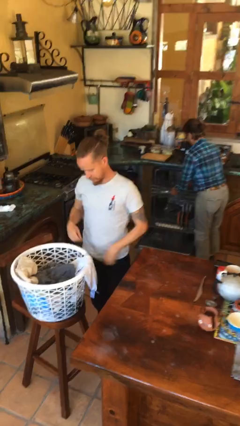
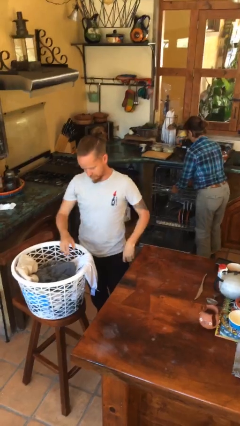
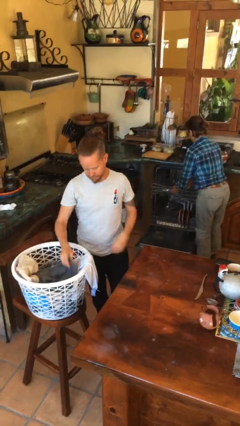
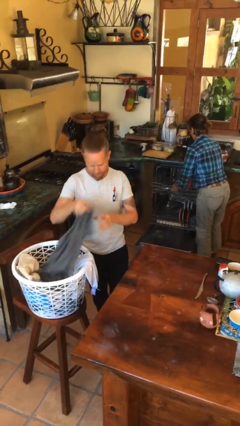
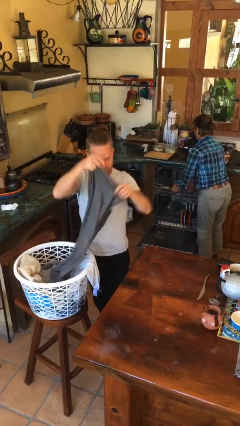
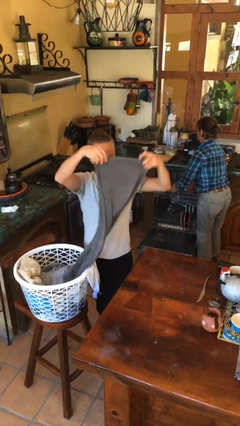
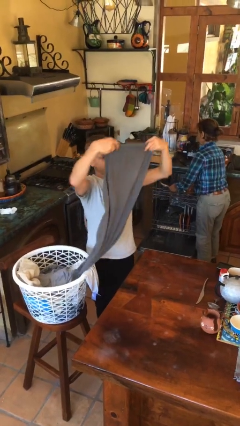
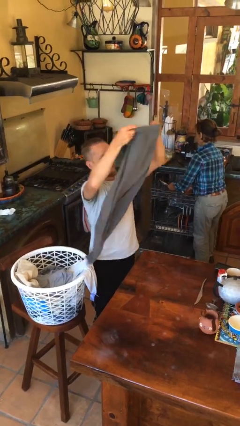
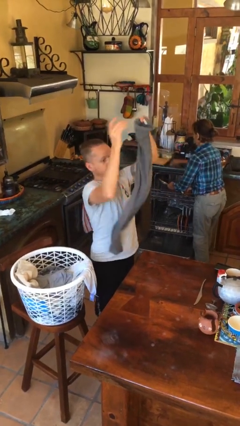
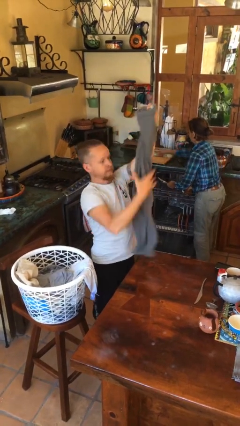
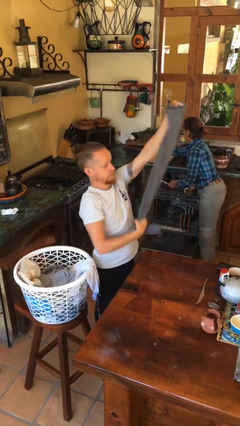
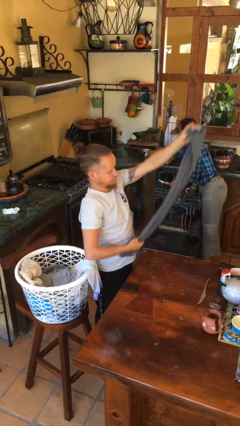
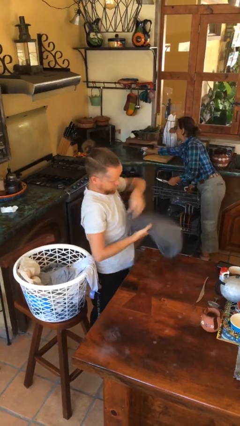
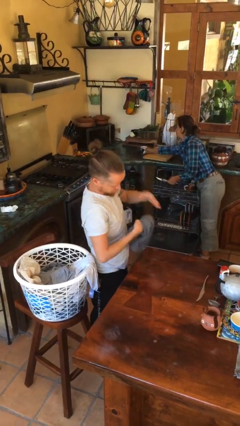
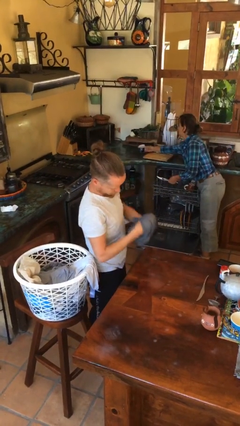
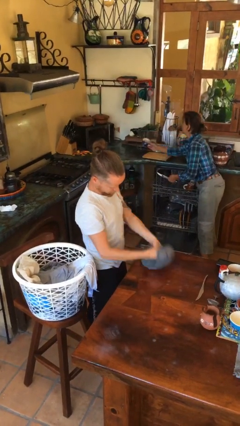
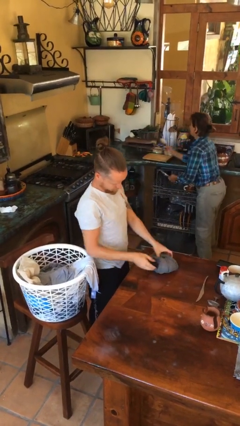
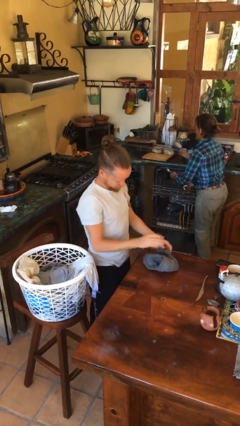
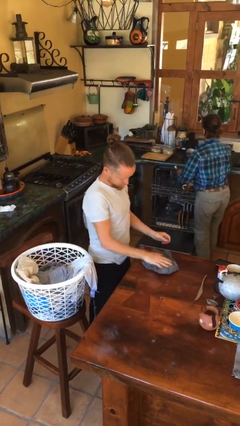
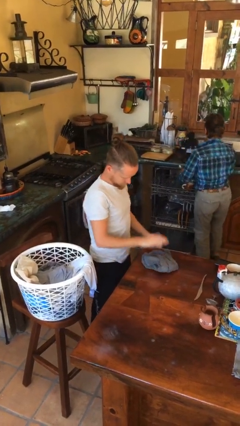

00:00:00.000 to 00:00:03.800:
person folds pants

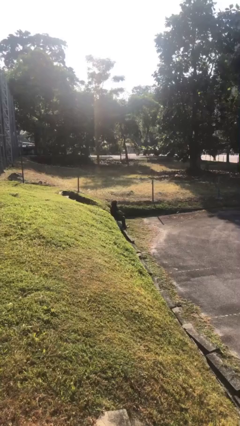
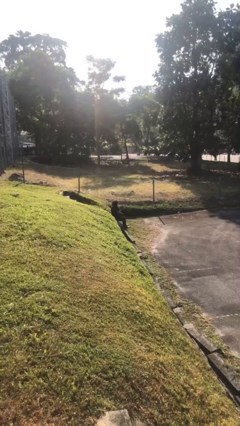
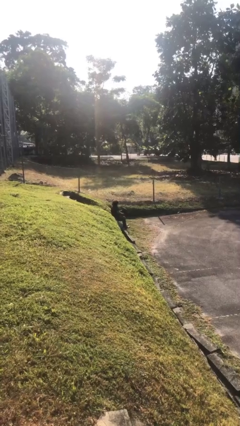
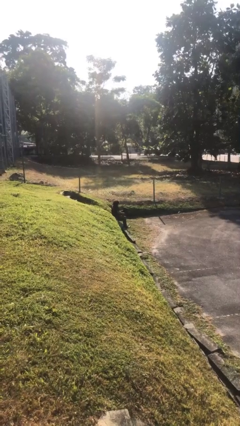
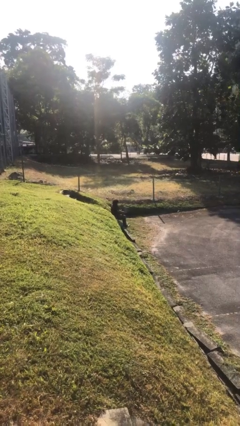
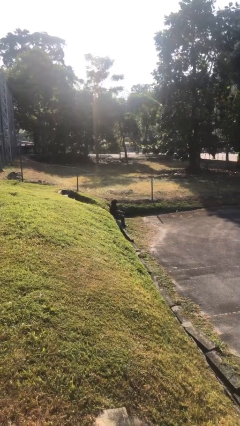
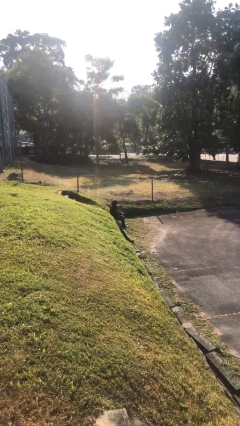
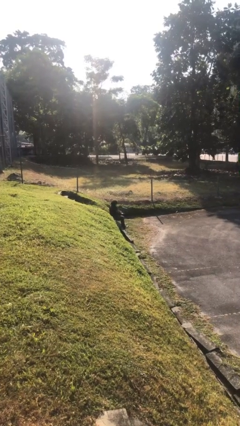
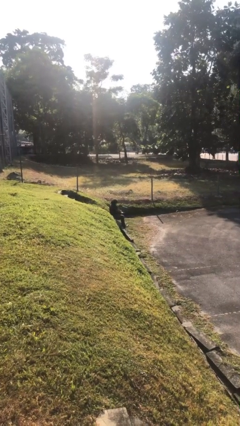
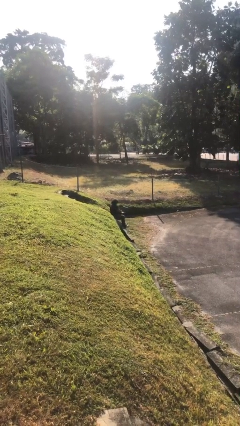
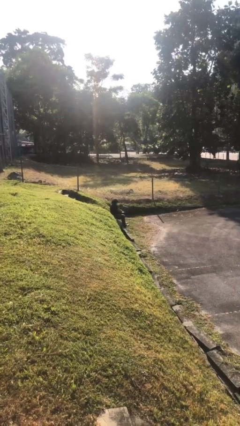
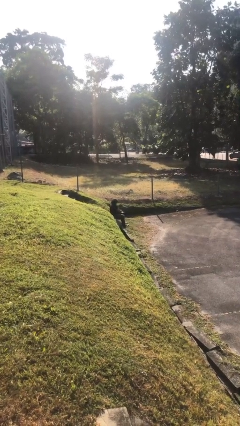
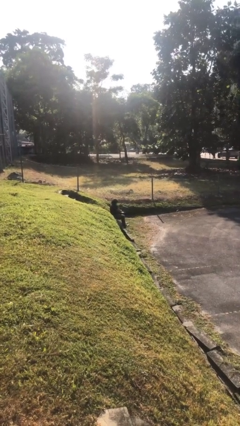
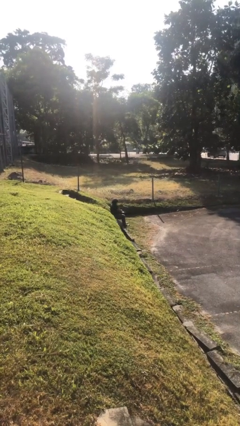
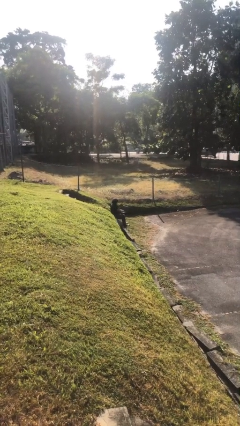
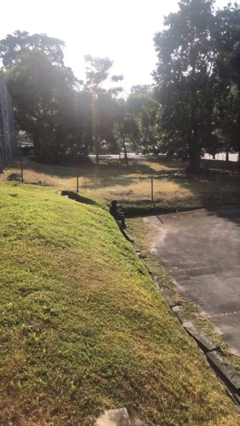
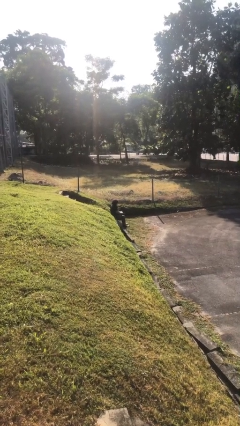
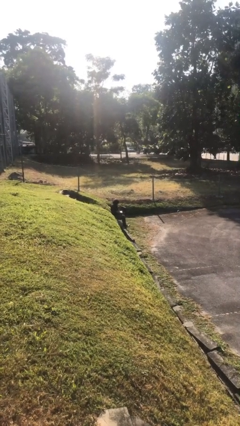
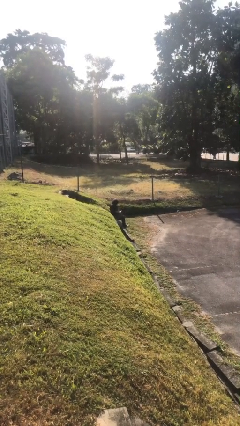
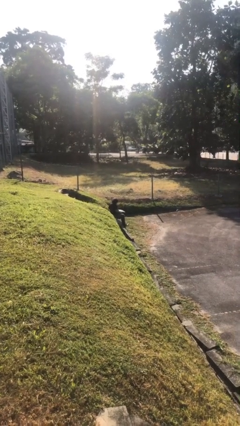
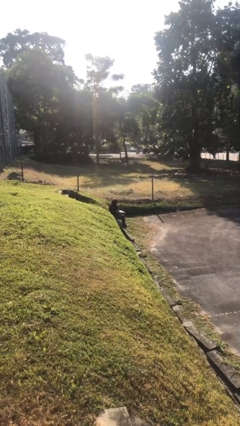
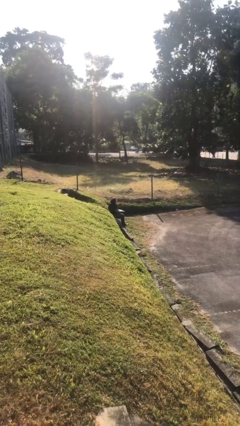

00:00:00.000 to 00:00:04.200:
person interacts with laptop

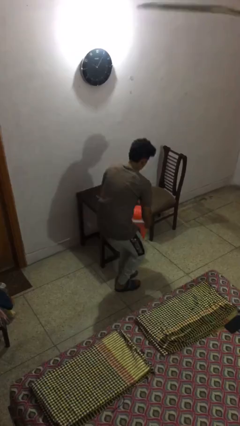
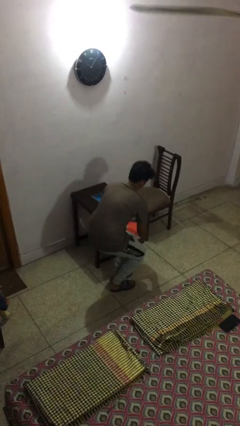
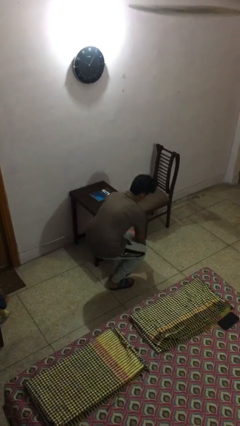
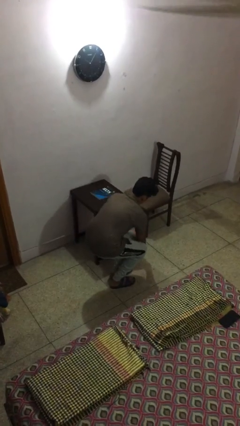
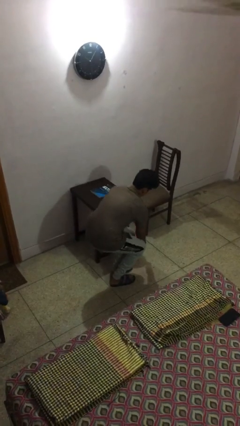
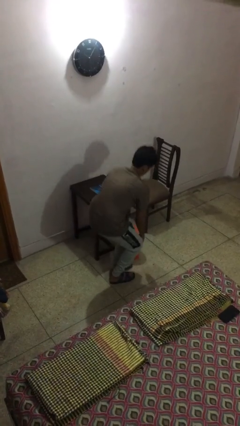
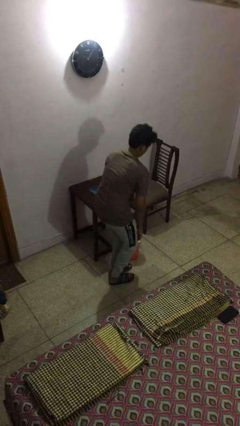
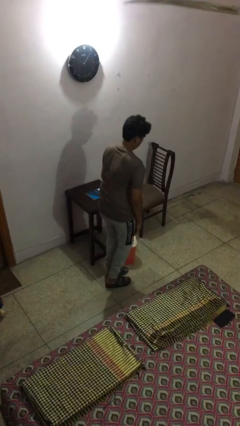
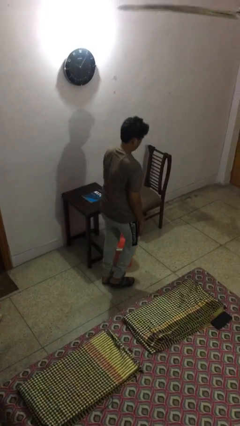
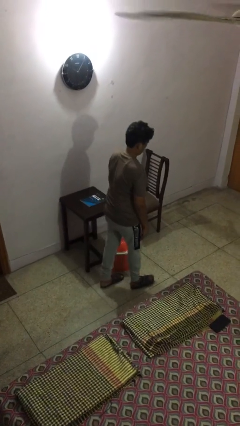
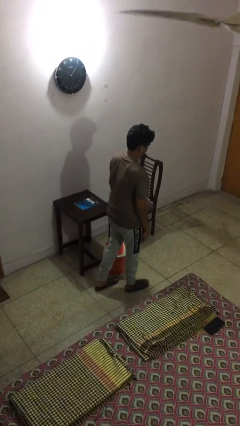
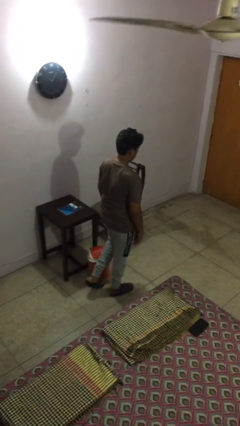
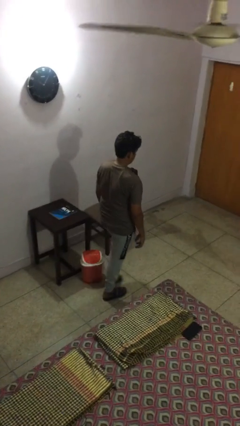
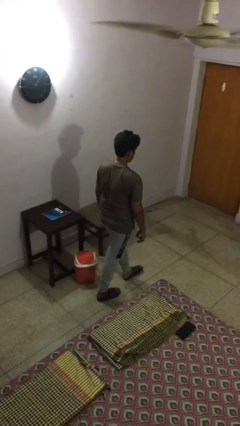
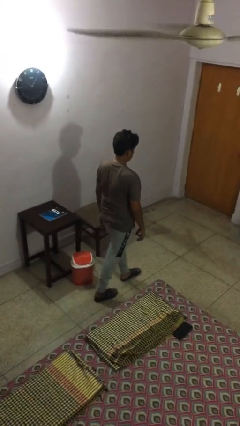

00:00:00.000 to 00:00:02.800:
person puts down object on floor

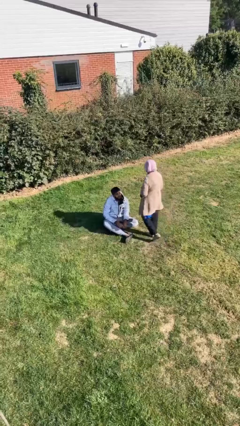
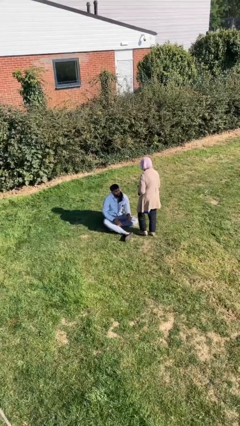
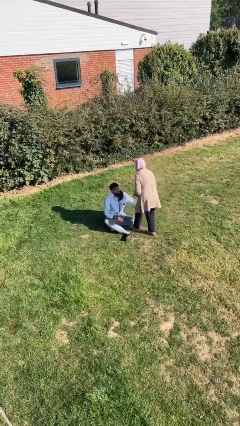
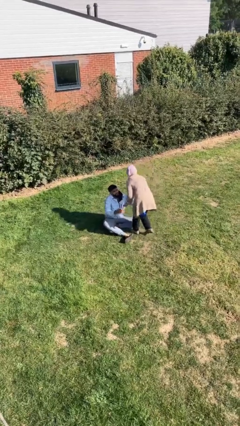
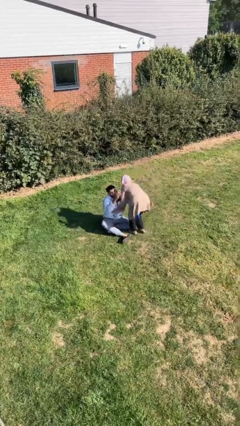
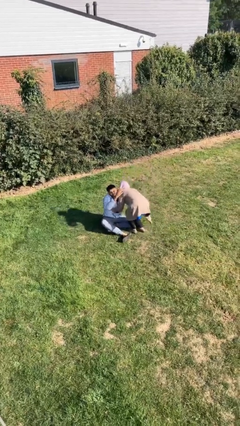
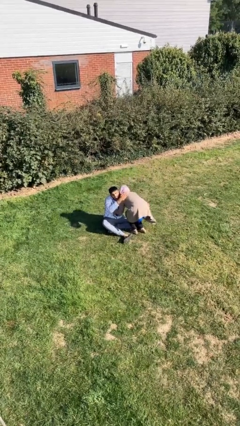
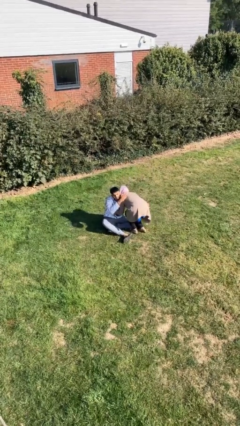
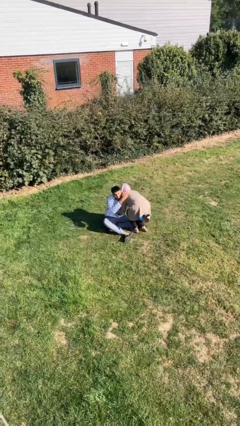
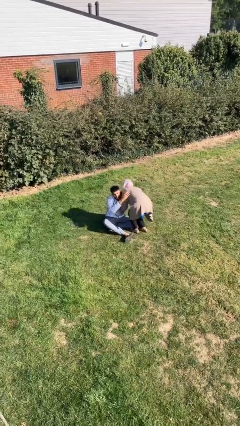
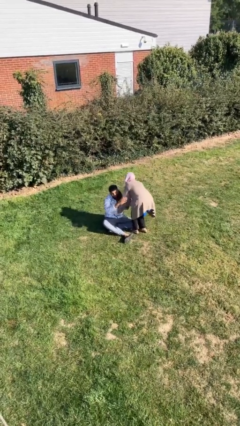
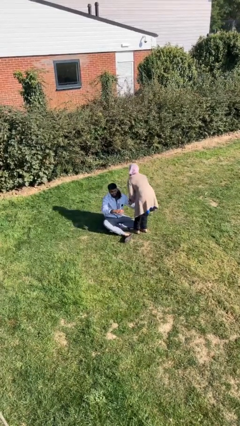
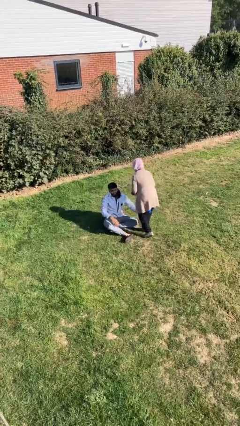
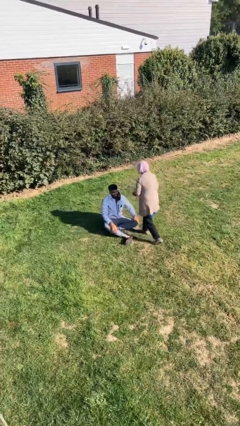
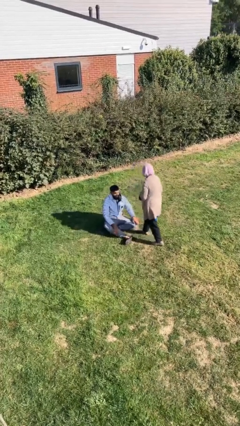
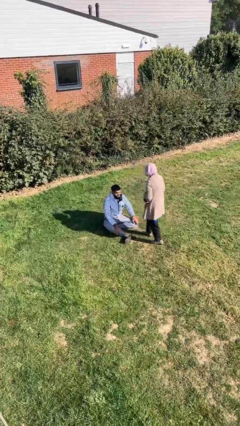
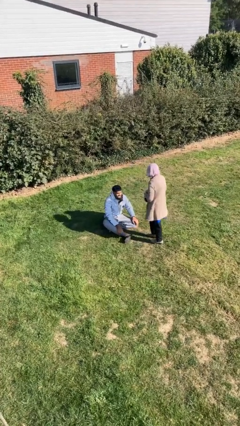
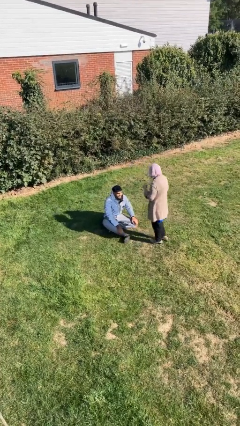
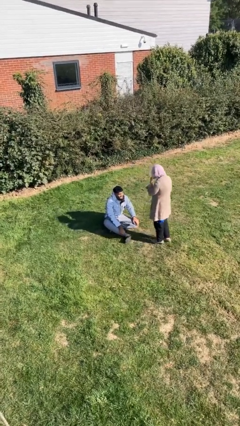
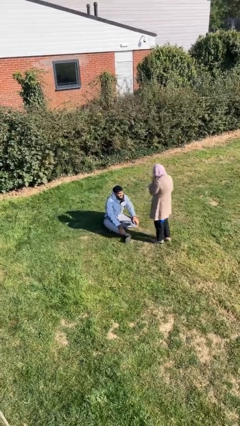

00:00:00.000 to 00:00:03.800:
person embraces person

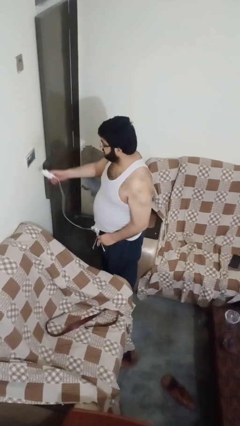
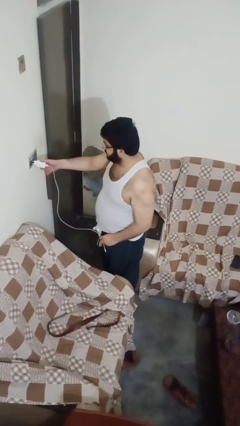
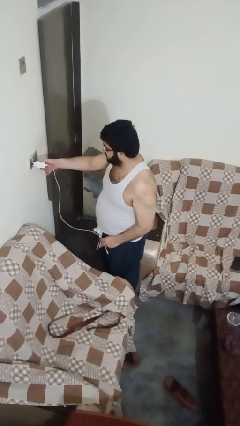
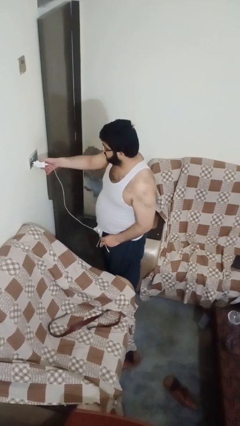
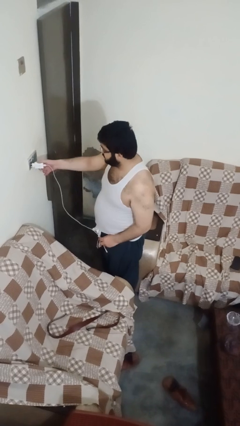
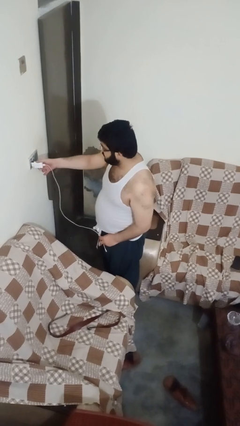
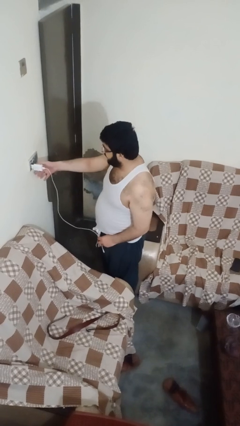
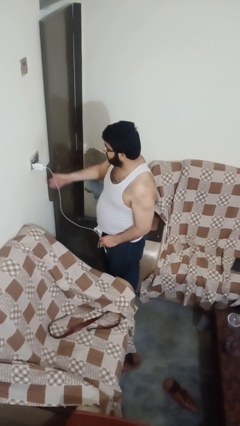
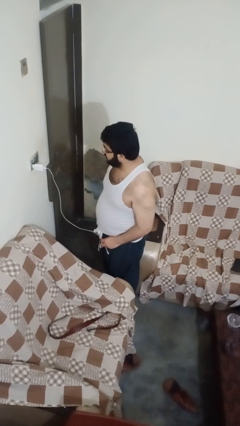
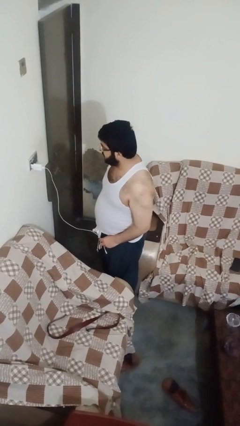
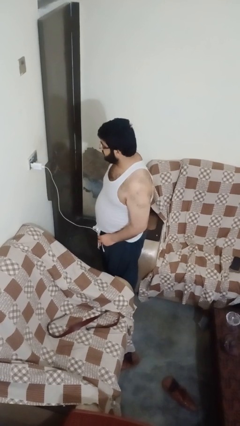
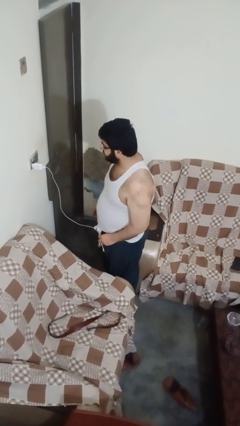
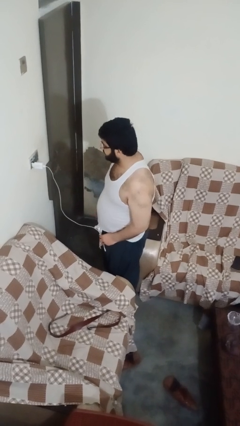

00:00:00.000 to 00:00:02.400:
person plugs into electrical socket
